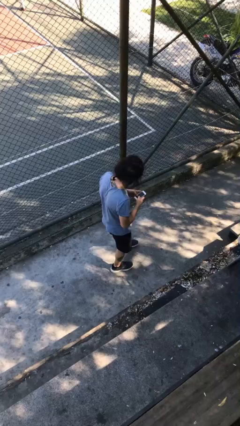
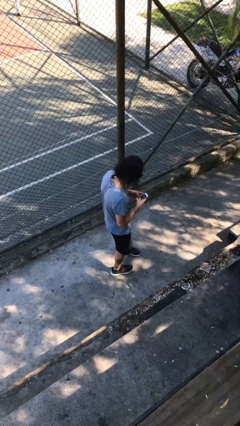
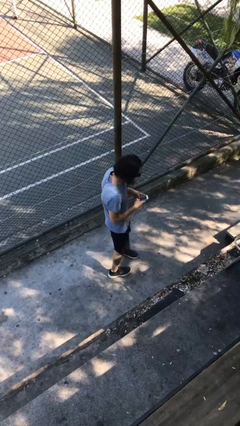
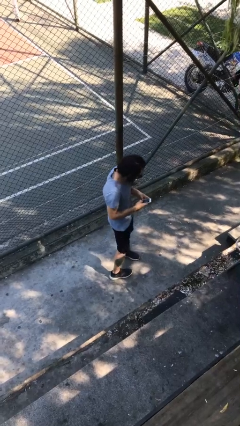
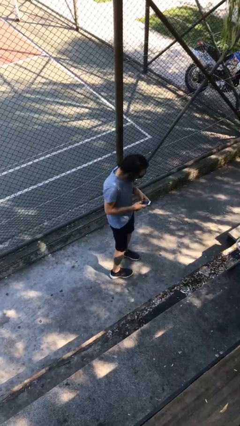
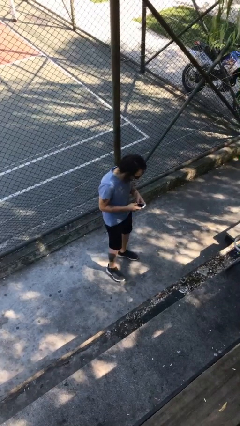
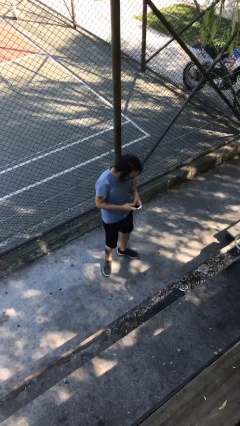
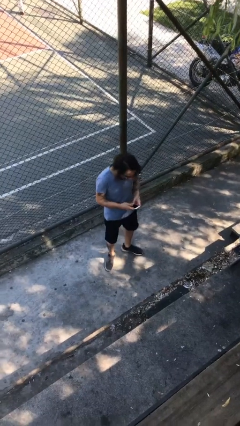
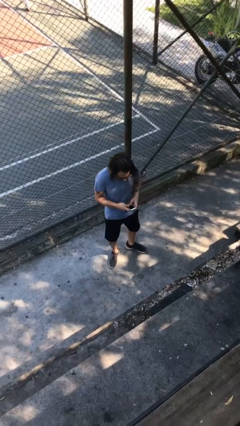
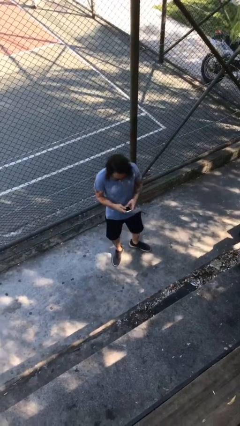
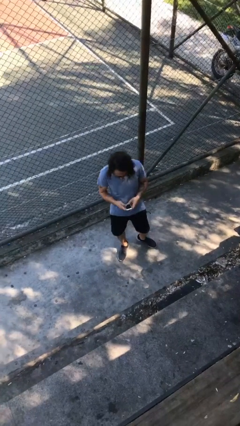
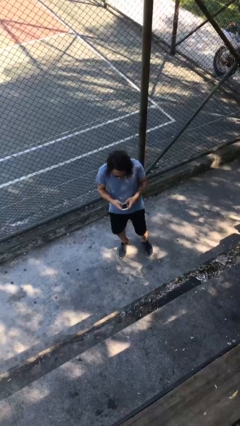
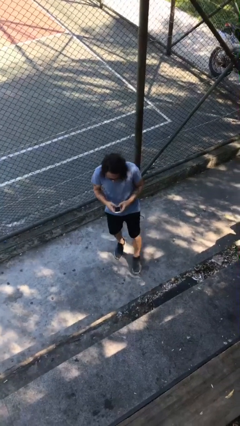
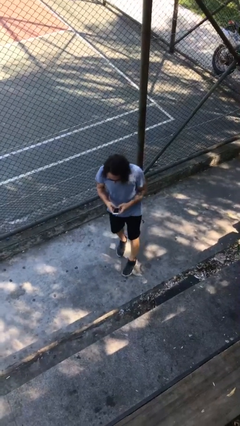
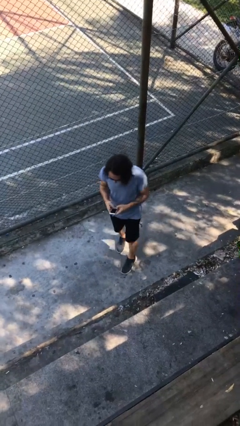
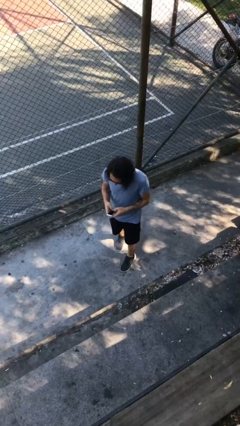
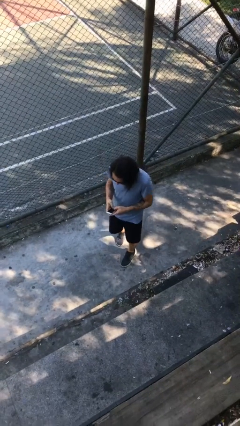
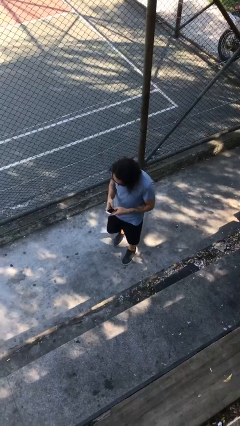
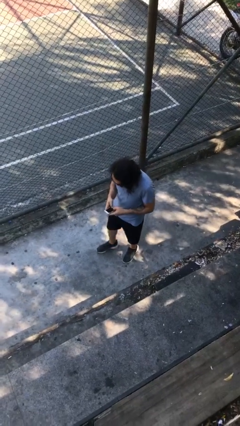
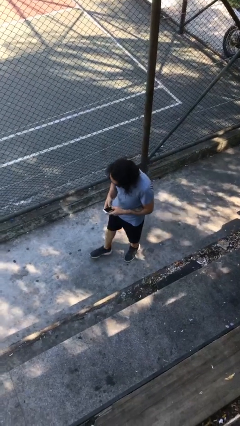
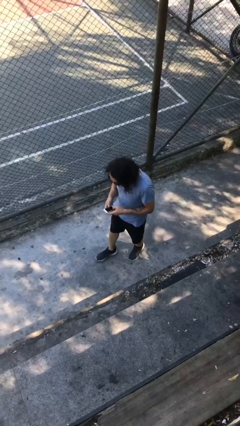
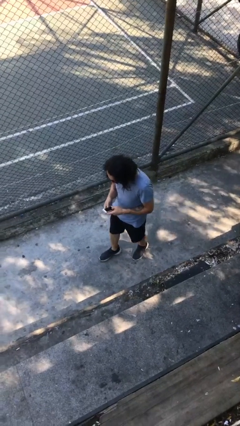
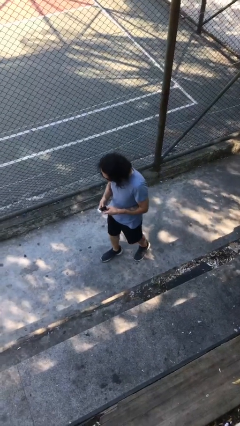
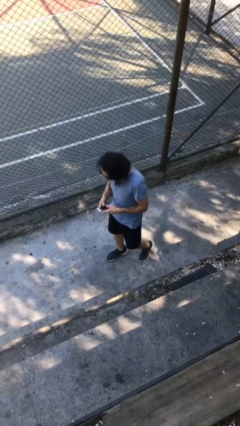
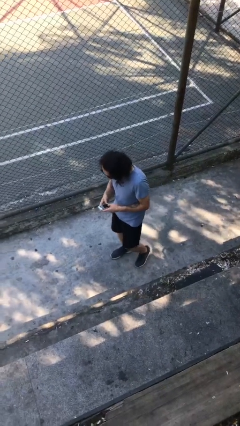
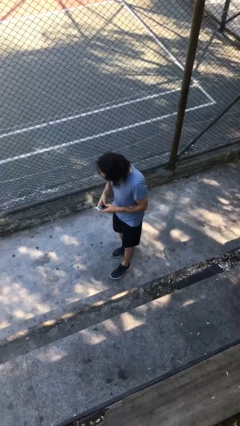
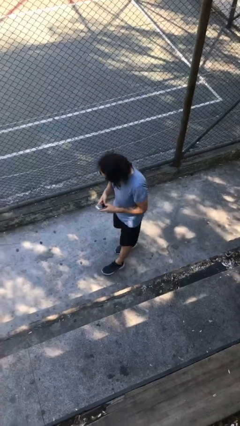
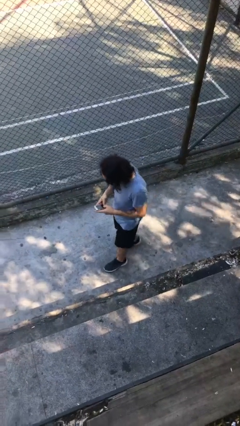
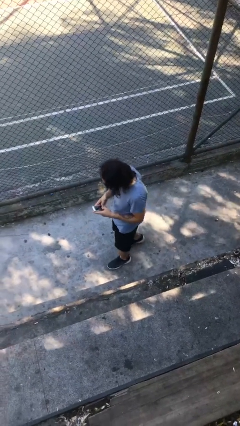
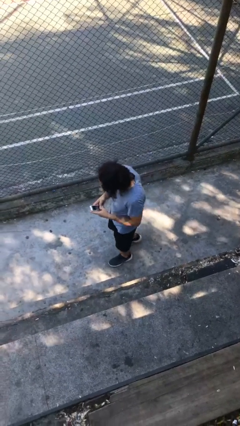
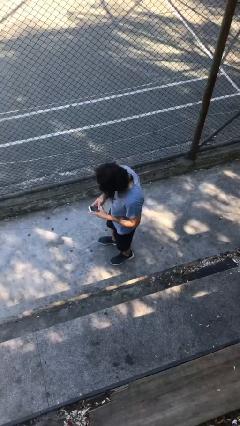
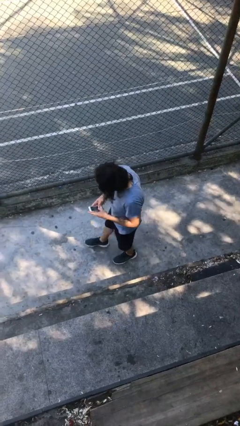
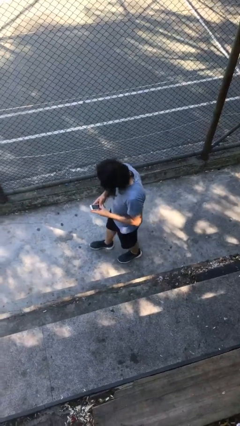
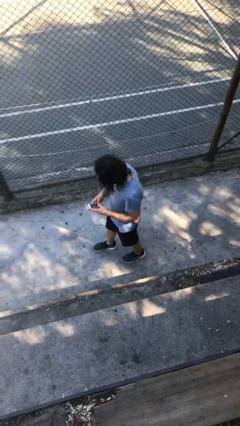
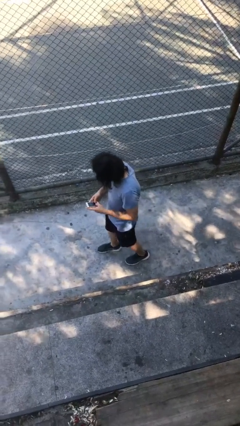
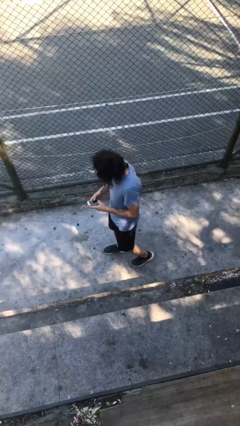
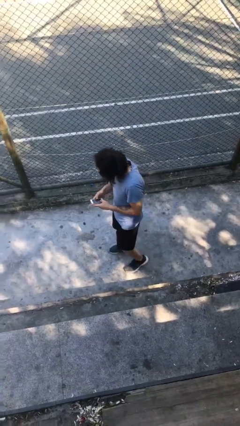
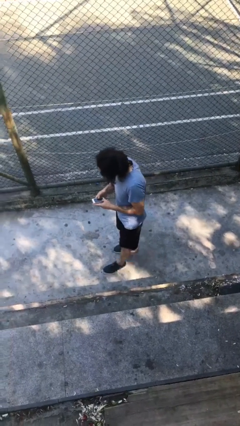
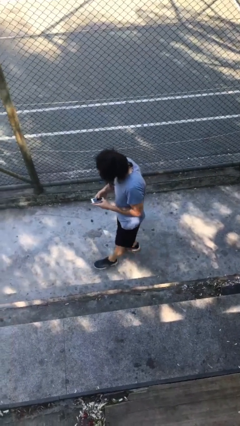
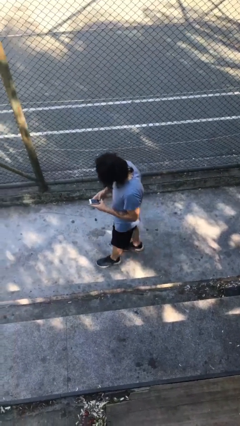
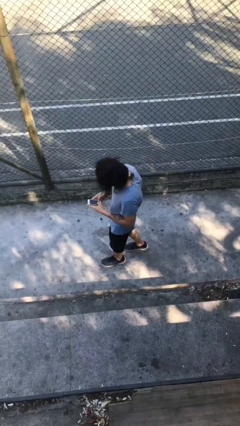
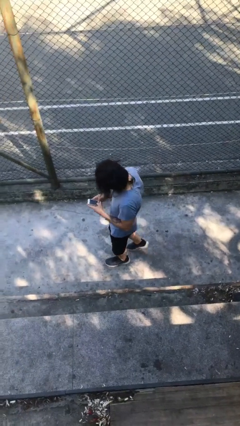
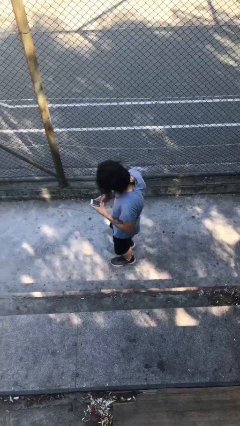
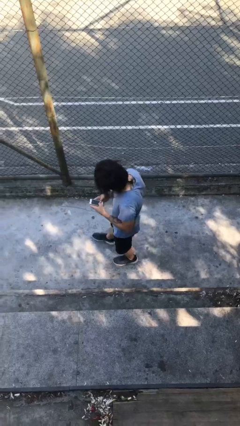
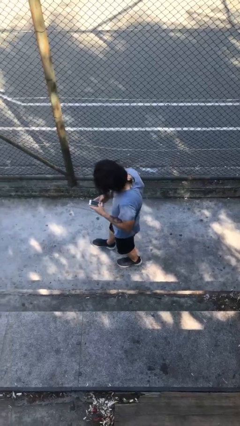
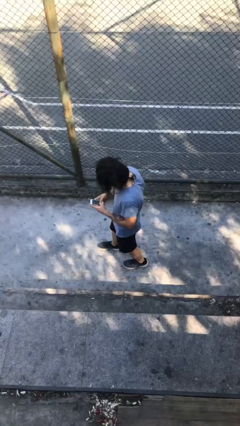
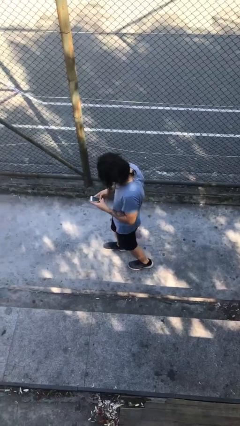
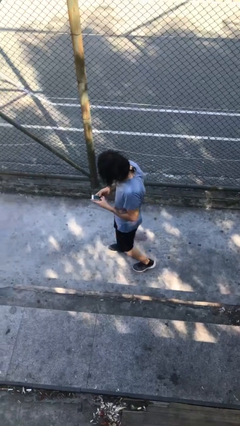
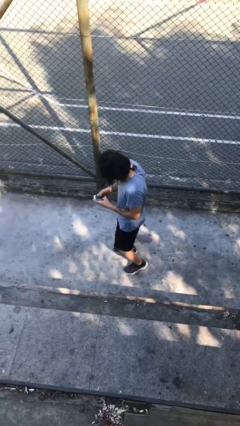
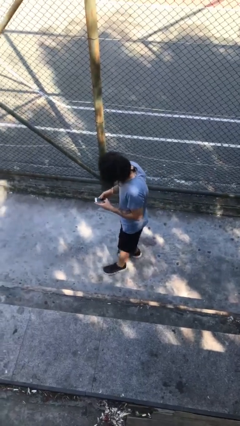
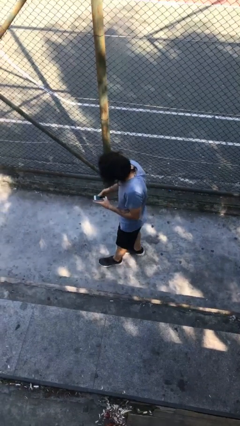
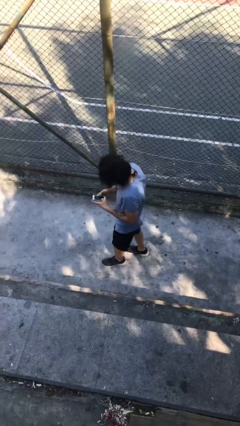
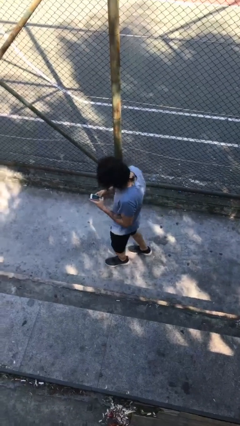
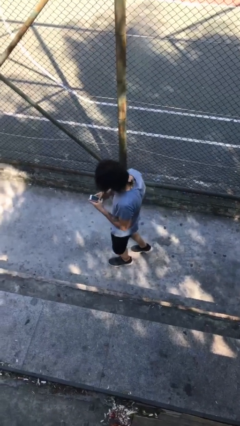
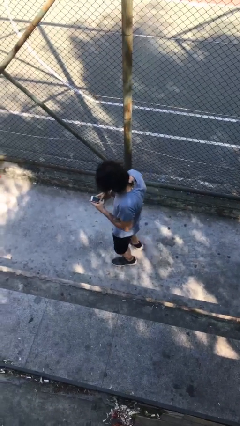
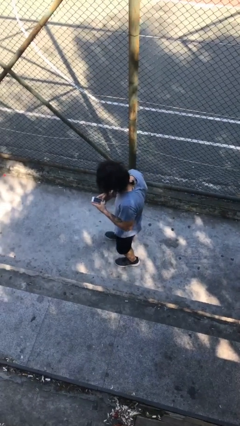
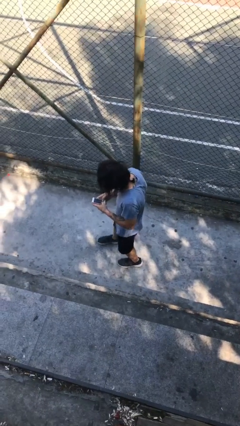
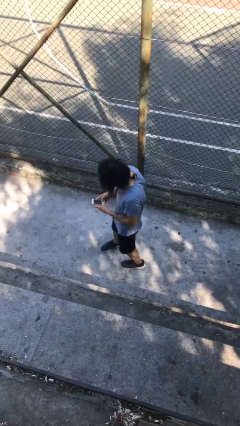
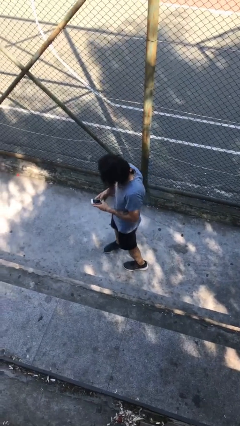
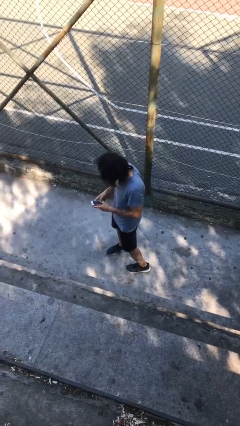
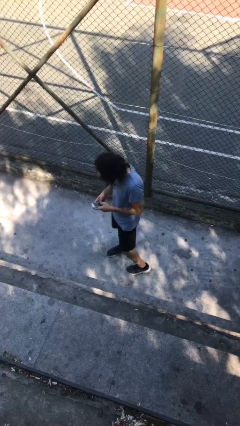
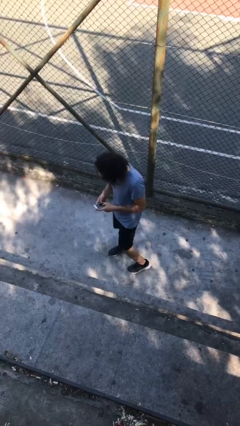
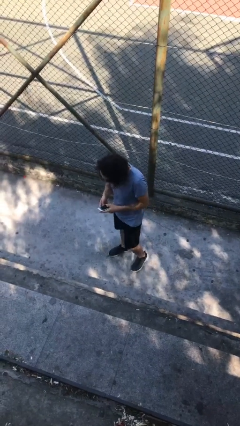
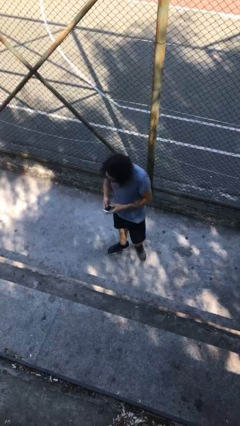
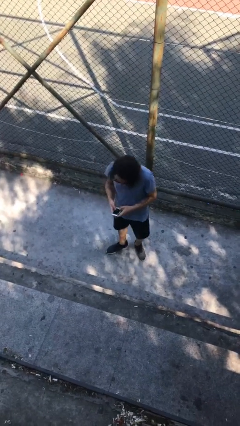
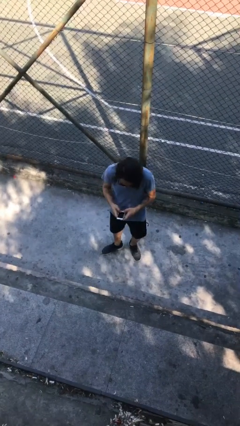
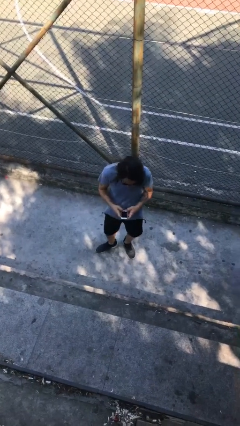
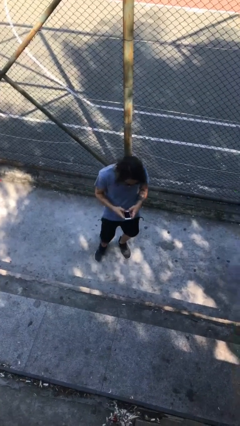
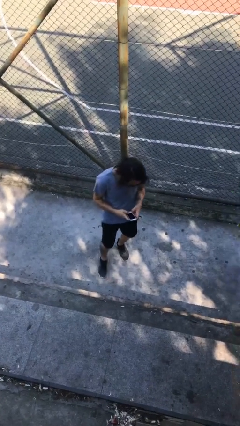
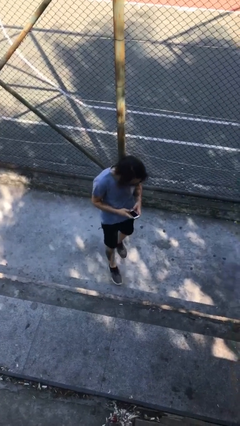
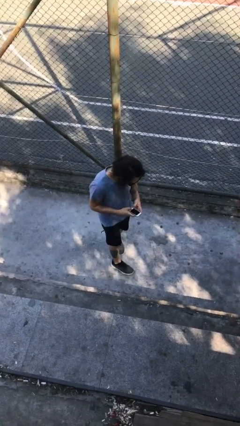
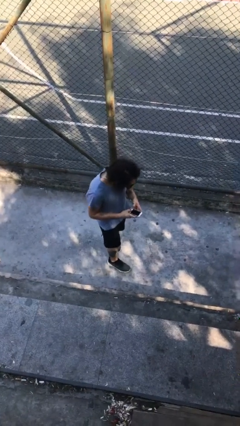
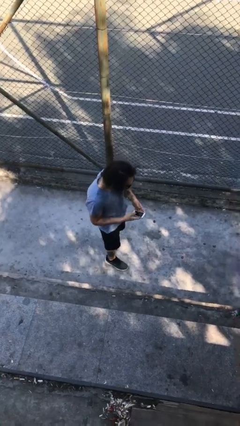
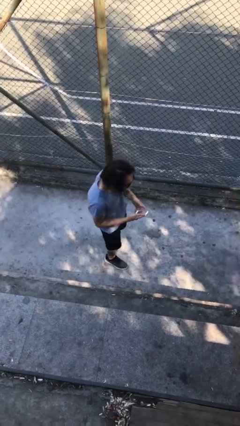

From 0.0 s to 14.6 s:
person texts on phone

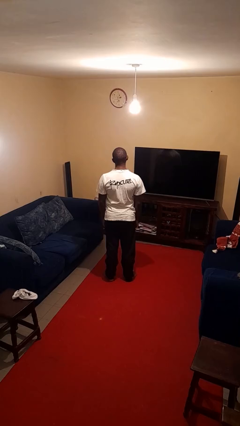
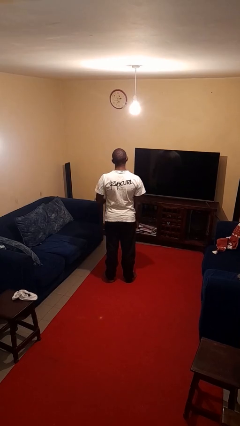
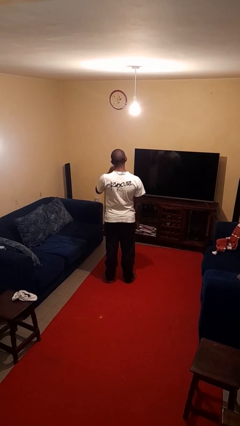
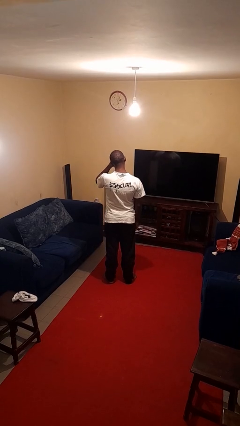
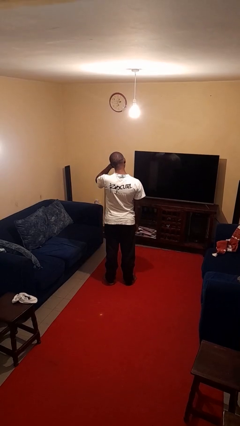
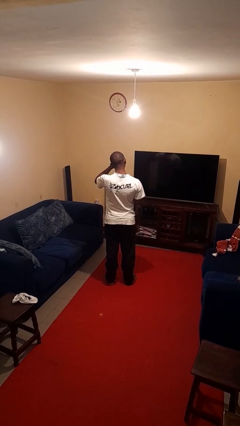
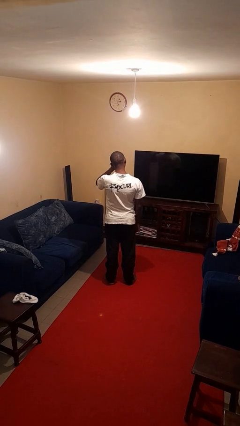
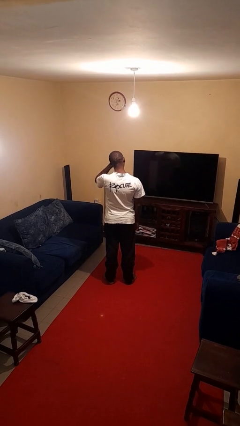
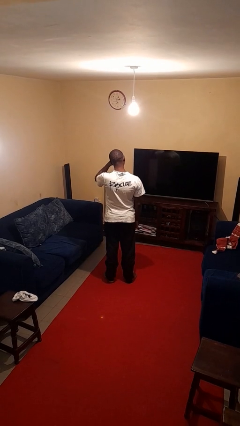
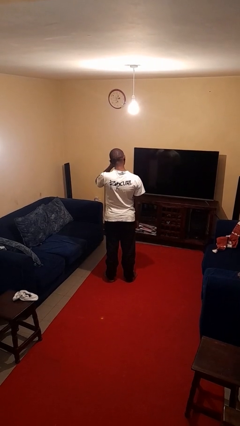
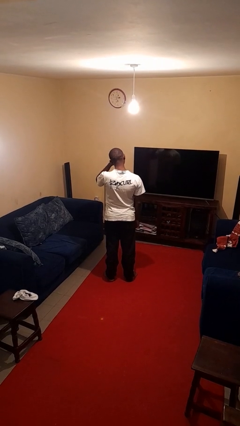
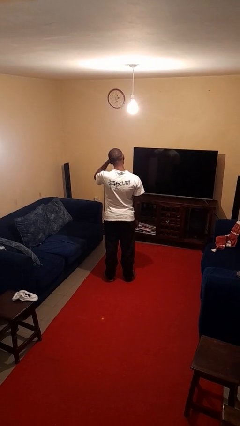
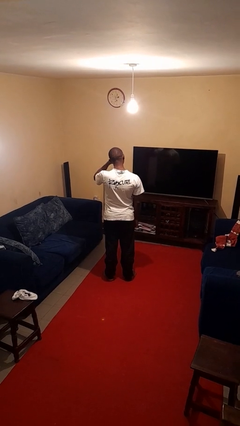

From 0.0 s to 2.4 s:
person rubs eyes

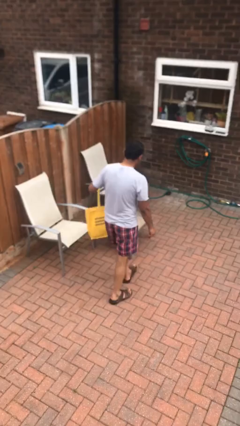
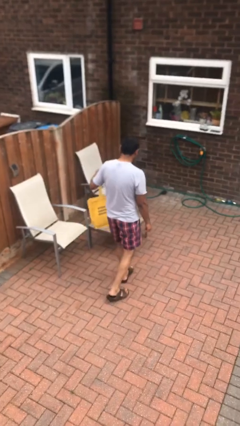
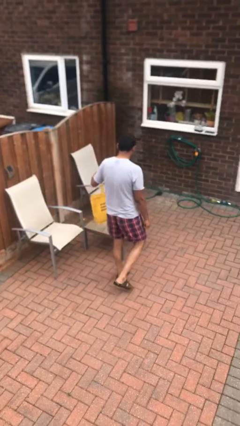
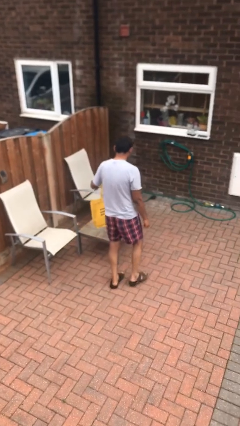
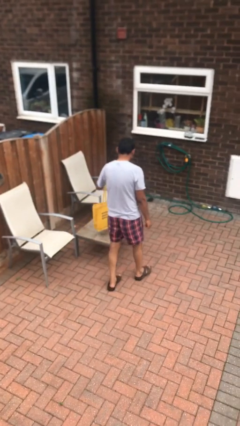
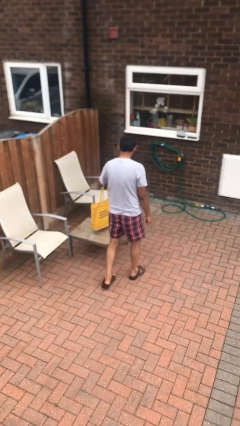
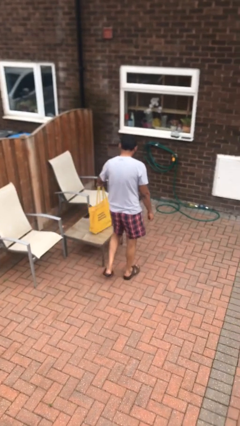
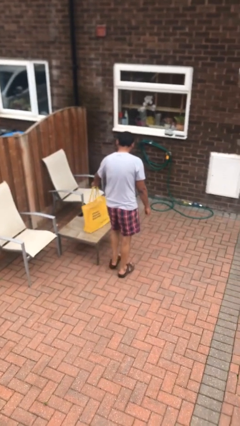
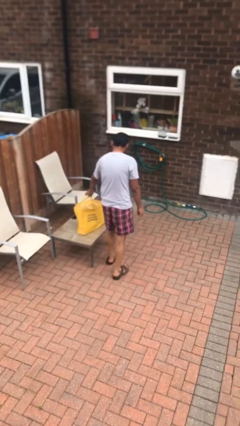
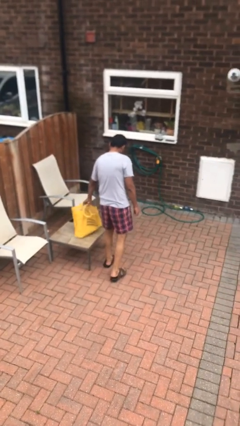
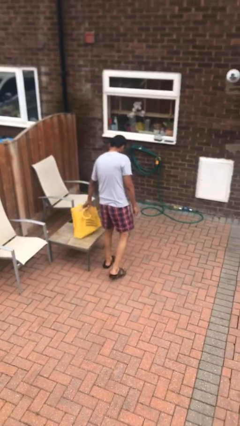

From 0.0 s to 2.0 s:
person puts down object on table
